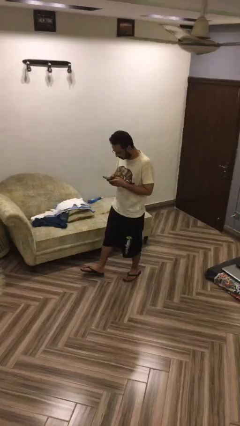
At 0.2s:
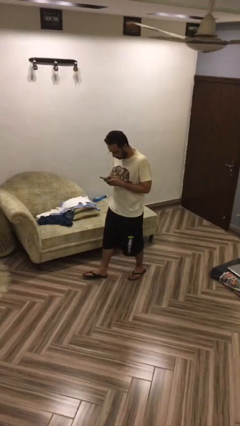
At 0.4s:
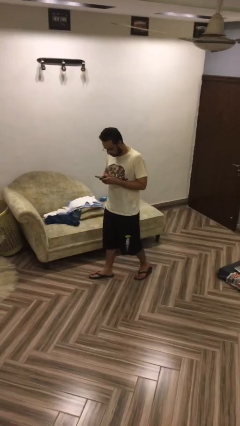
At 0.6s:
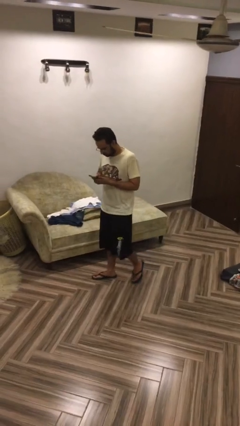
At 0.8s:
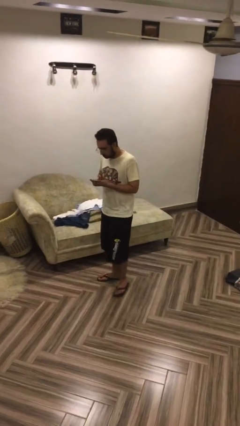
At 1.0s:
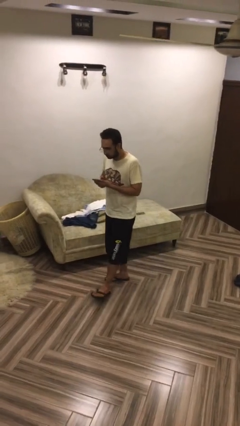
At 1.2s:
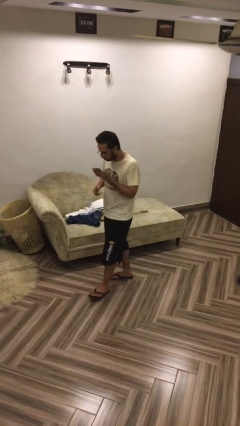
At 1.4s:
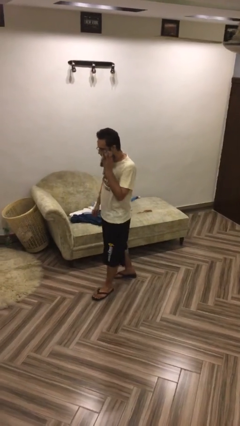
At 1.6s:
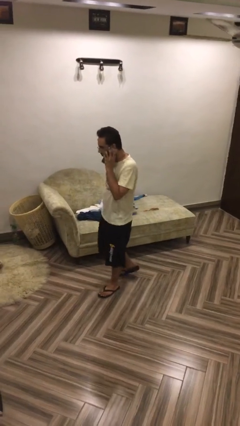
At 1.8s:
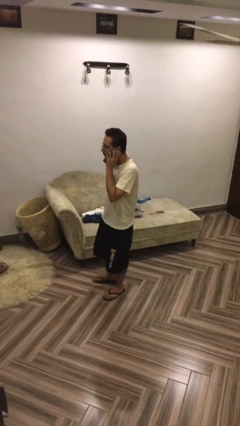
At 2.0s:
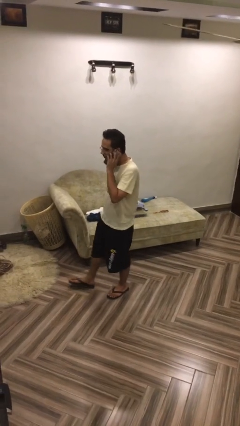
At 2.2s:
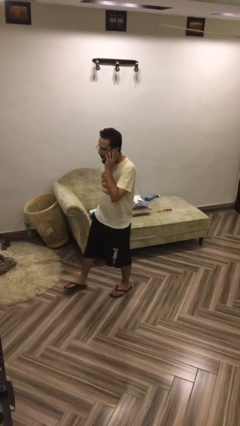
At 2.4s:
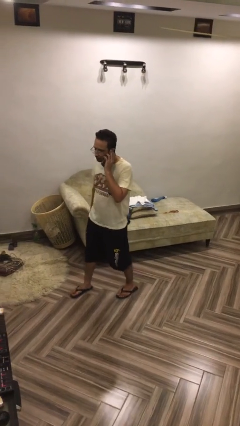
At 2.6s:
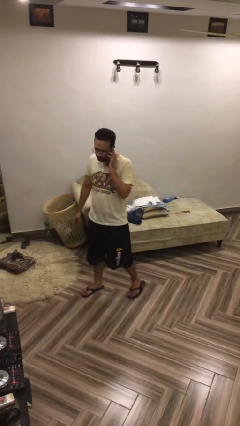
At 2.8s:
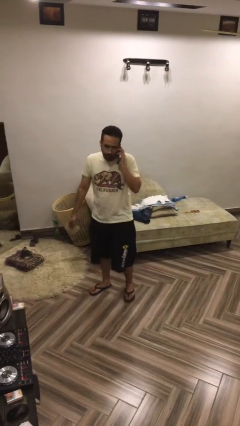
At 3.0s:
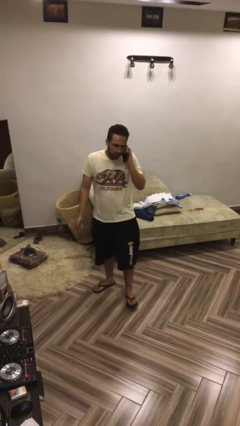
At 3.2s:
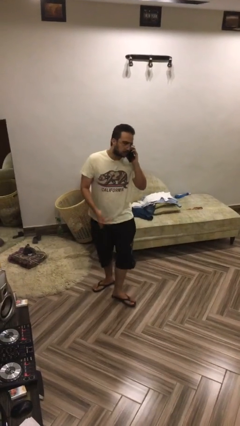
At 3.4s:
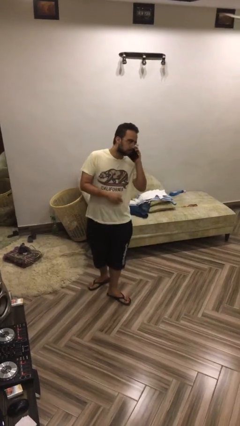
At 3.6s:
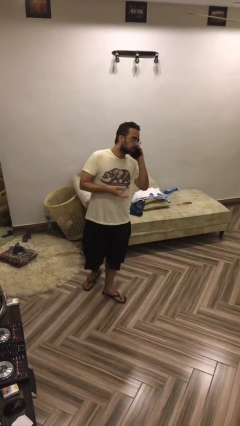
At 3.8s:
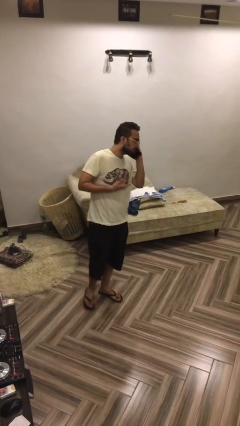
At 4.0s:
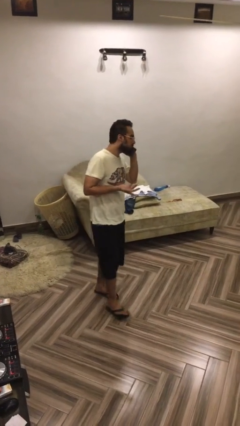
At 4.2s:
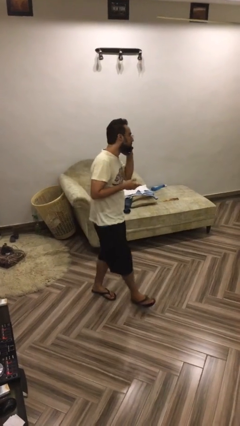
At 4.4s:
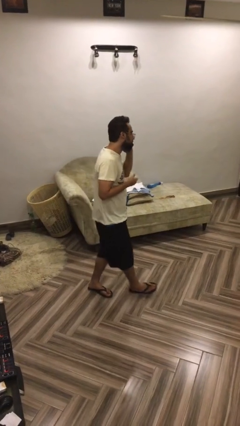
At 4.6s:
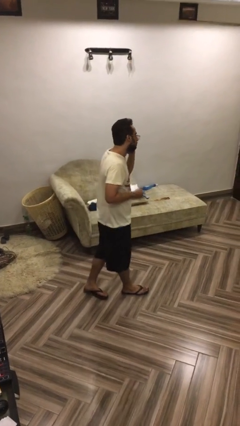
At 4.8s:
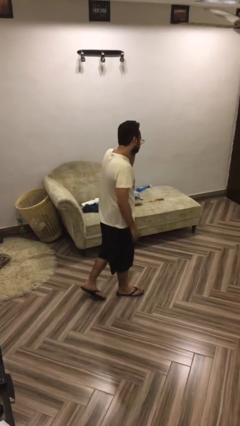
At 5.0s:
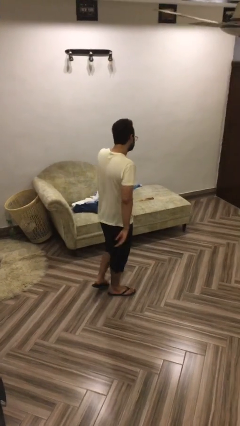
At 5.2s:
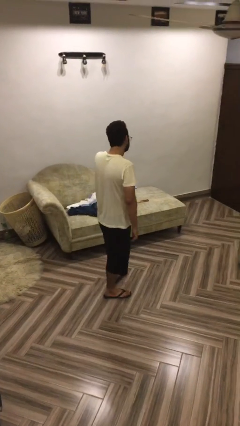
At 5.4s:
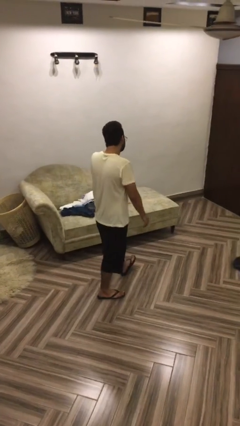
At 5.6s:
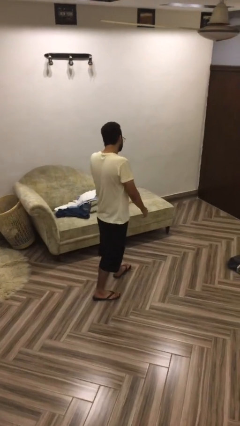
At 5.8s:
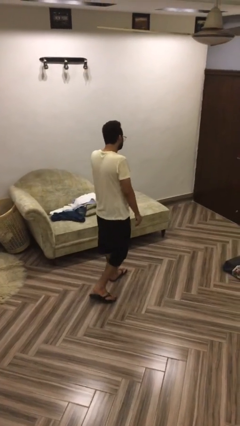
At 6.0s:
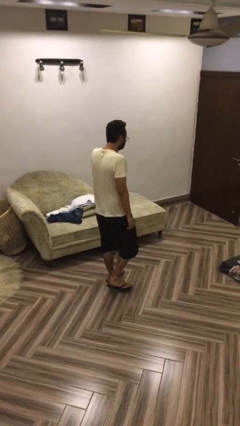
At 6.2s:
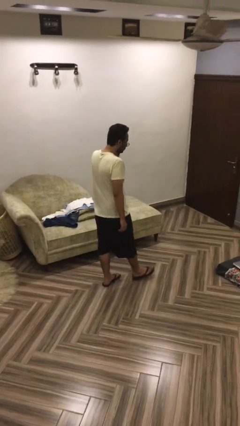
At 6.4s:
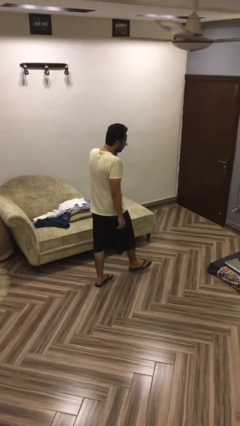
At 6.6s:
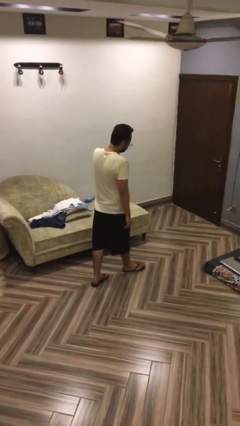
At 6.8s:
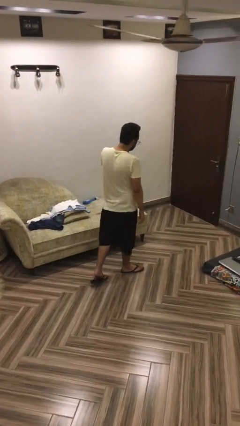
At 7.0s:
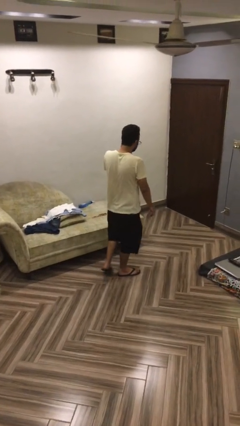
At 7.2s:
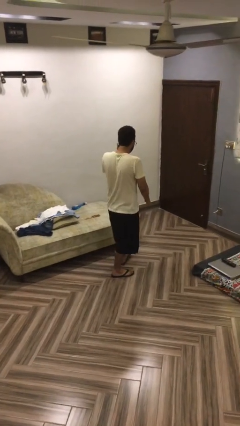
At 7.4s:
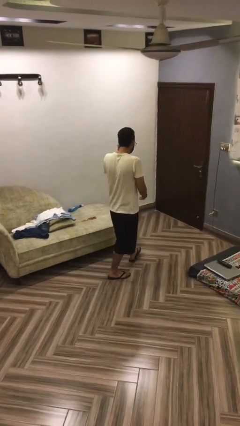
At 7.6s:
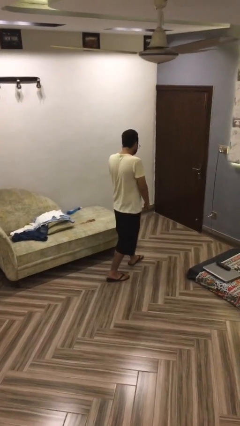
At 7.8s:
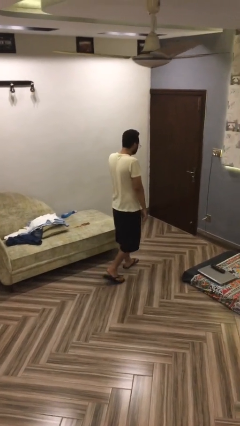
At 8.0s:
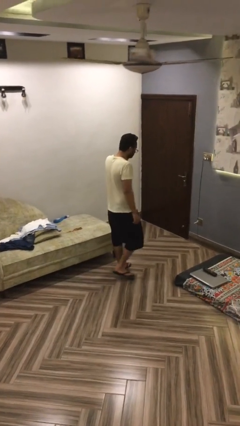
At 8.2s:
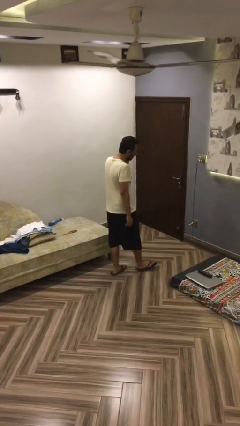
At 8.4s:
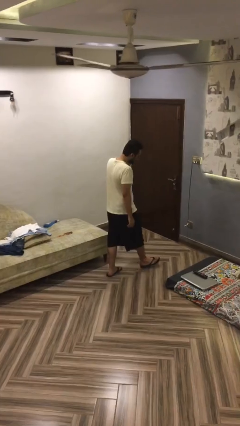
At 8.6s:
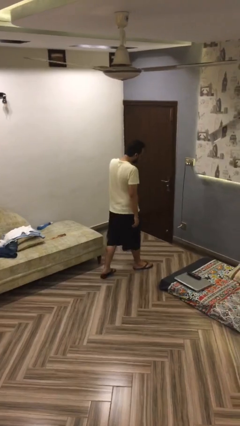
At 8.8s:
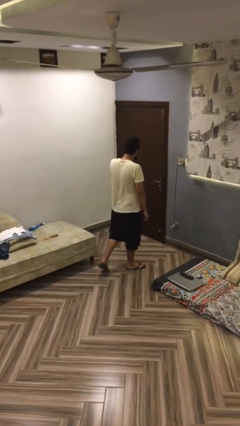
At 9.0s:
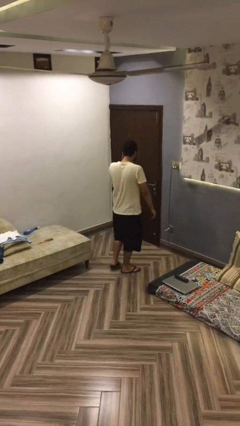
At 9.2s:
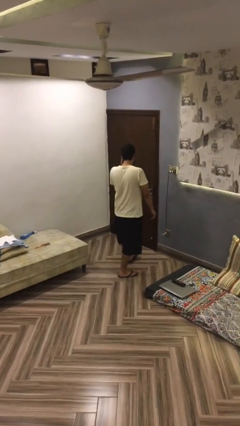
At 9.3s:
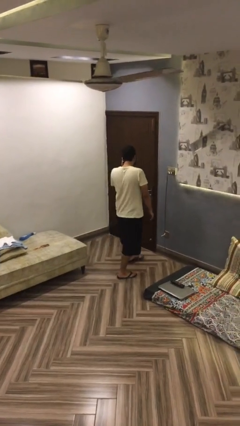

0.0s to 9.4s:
person talks on phone

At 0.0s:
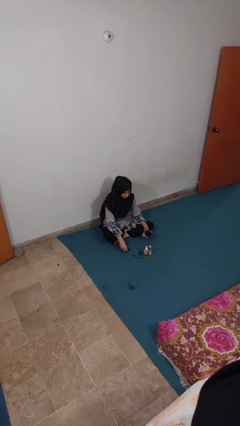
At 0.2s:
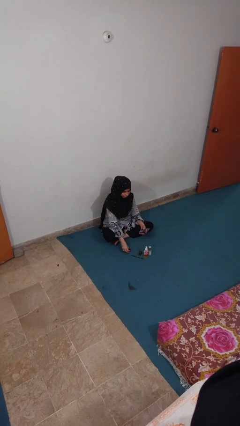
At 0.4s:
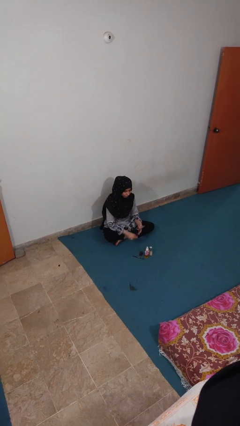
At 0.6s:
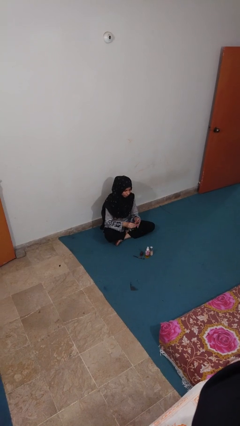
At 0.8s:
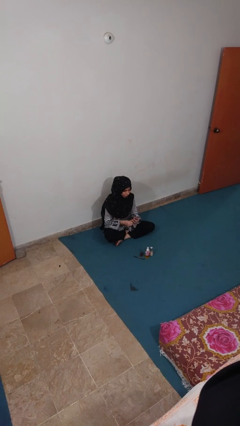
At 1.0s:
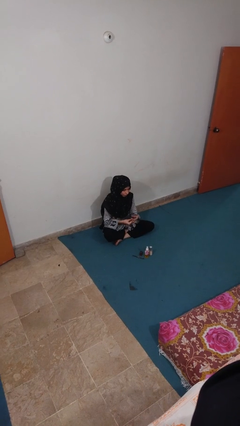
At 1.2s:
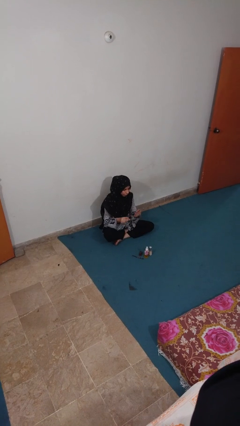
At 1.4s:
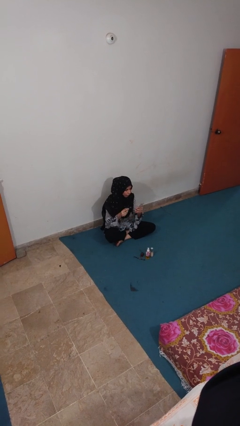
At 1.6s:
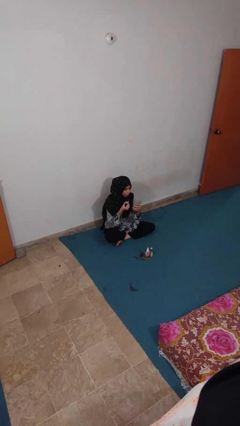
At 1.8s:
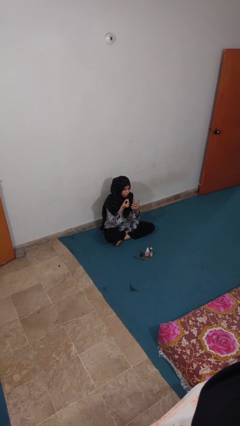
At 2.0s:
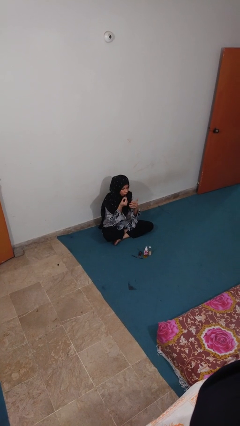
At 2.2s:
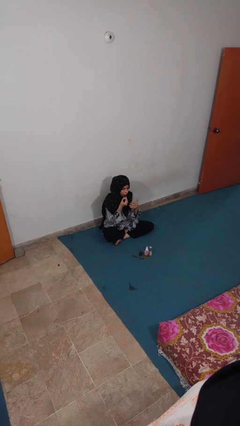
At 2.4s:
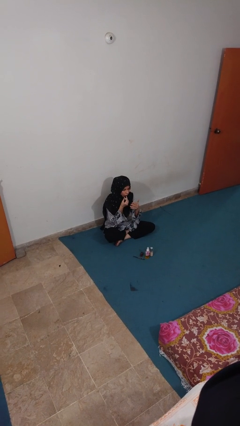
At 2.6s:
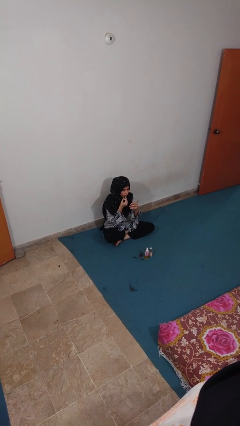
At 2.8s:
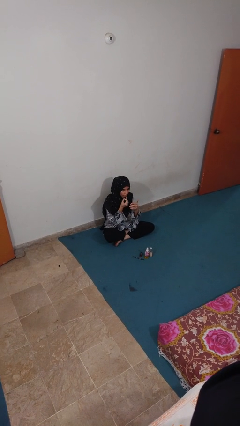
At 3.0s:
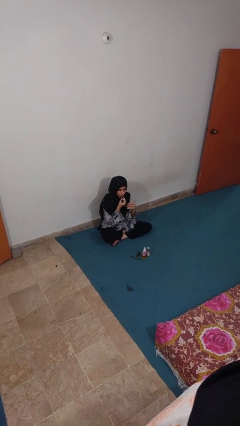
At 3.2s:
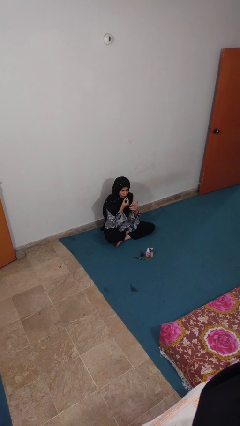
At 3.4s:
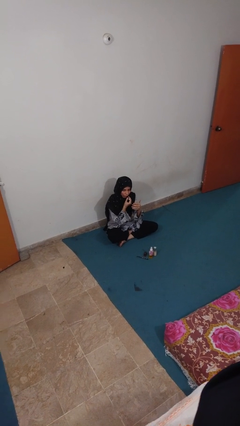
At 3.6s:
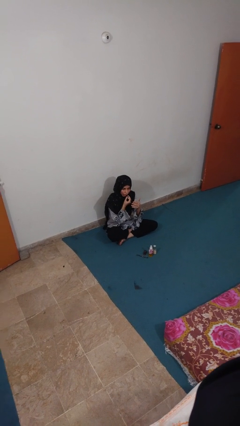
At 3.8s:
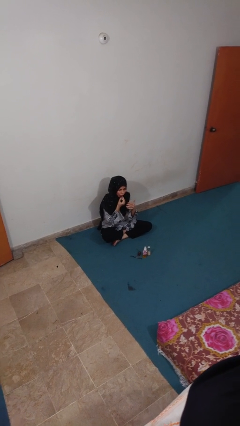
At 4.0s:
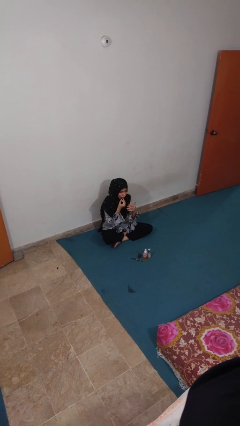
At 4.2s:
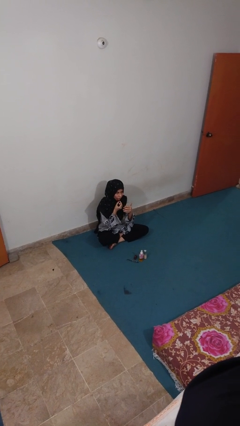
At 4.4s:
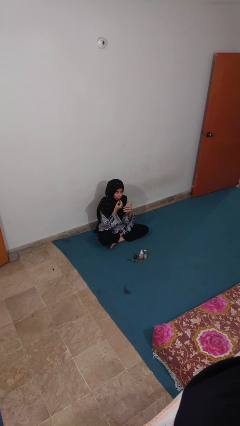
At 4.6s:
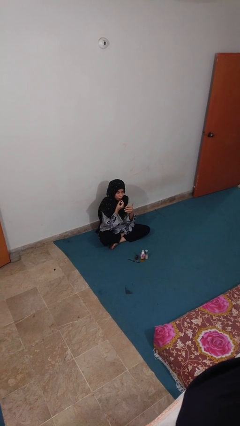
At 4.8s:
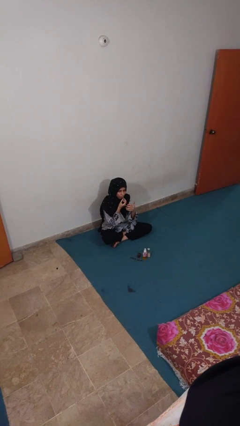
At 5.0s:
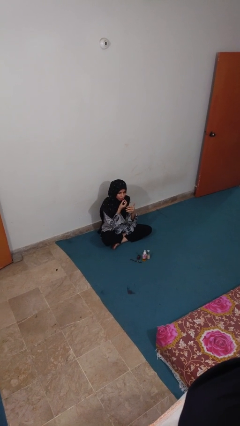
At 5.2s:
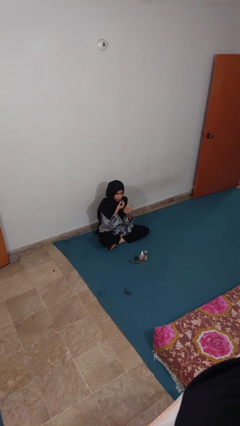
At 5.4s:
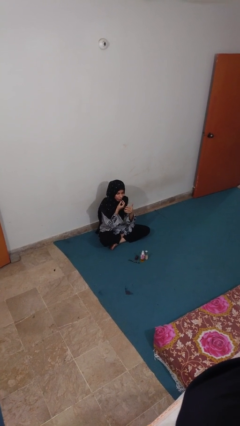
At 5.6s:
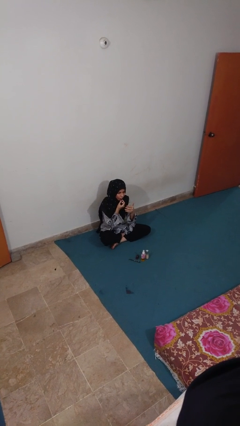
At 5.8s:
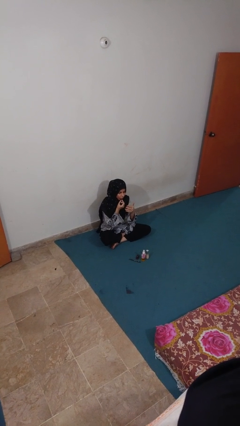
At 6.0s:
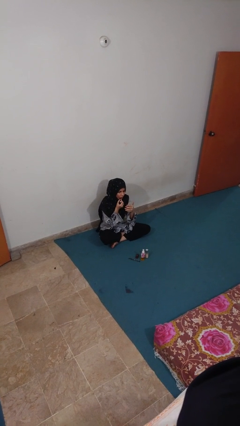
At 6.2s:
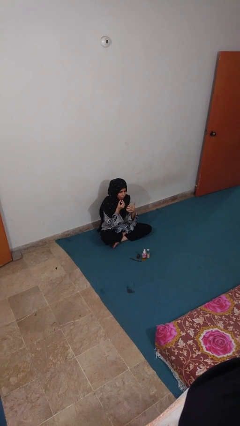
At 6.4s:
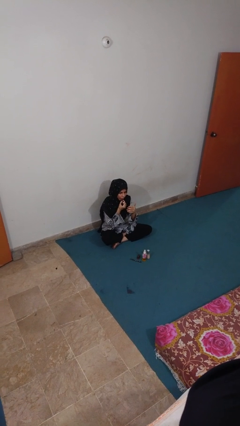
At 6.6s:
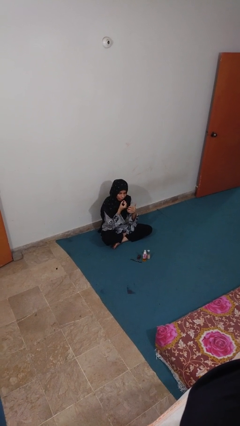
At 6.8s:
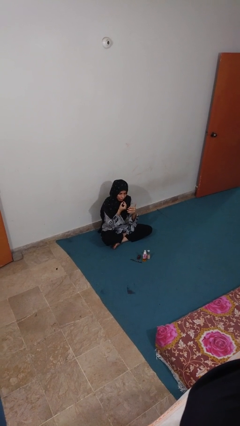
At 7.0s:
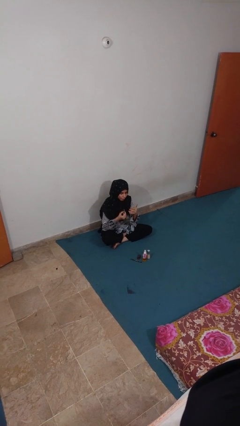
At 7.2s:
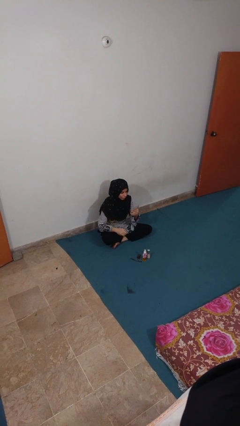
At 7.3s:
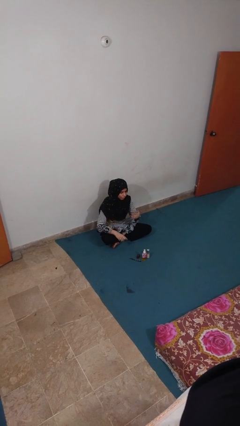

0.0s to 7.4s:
person applies lip makeup

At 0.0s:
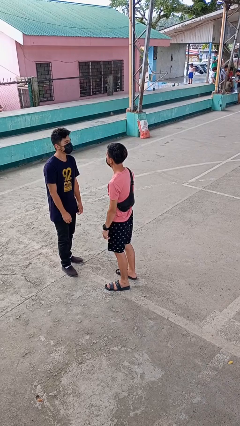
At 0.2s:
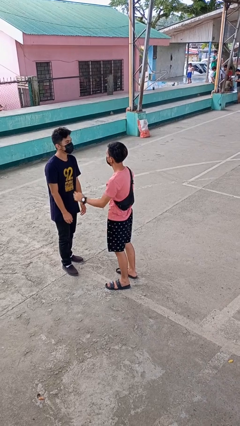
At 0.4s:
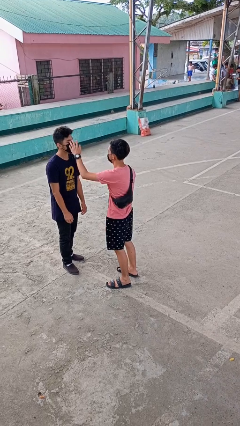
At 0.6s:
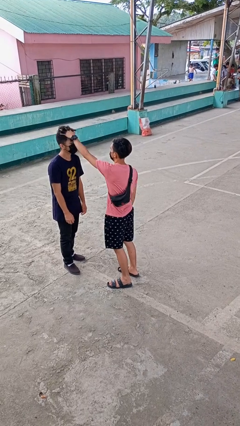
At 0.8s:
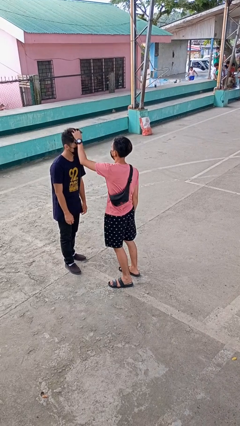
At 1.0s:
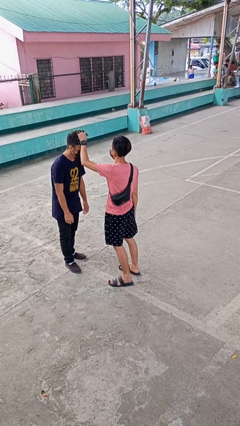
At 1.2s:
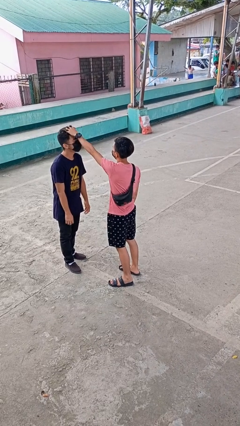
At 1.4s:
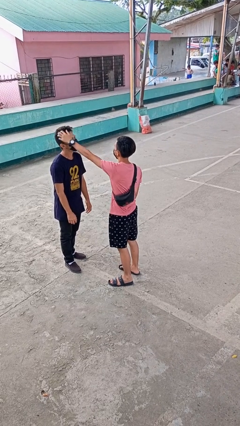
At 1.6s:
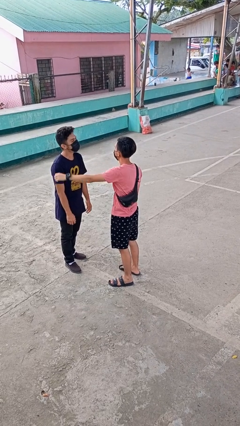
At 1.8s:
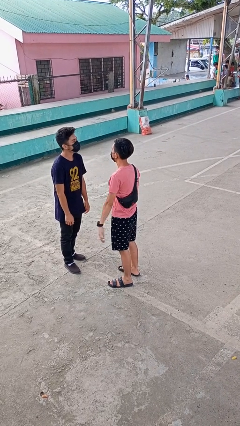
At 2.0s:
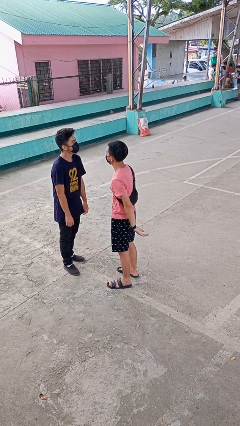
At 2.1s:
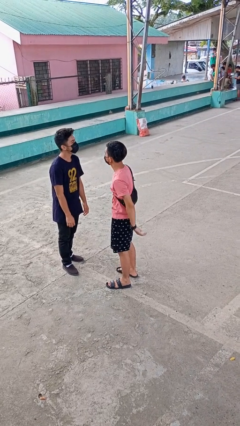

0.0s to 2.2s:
person grabs person by hair
